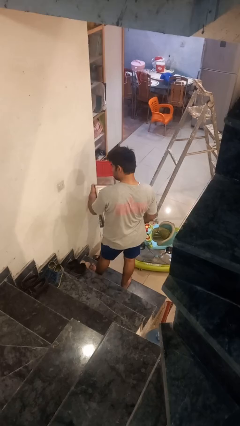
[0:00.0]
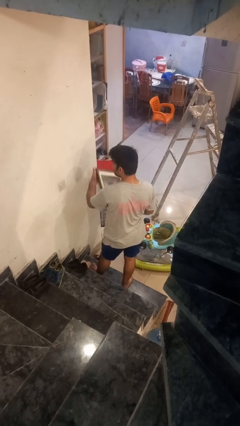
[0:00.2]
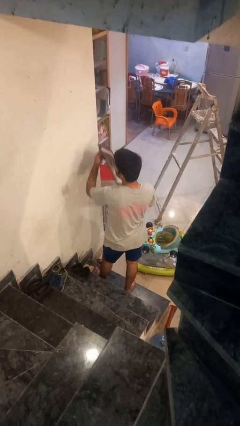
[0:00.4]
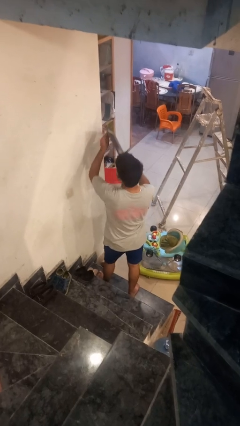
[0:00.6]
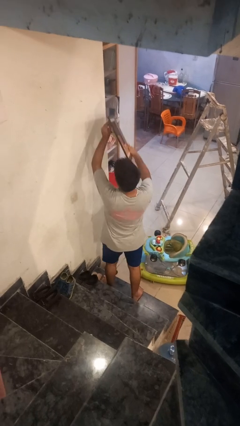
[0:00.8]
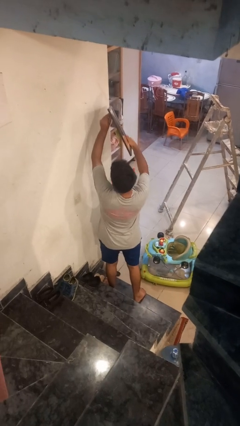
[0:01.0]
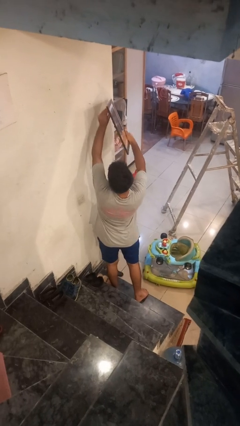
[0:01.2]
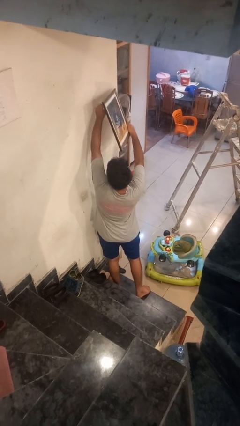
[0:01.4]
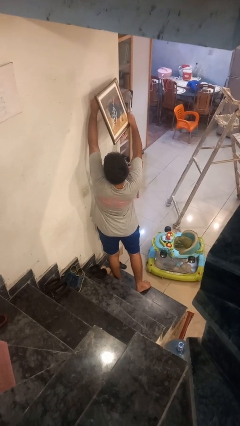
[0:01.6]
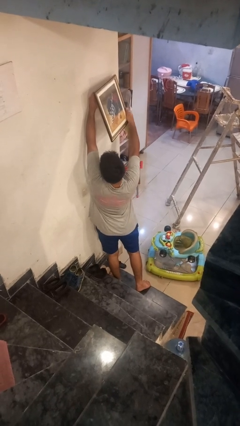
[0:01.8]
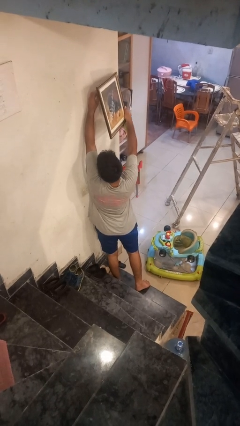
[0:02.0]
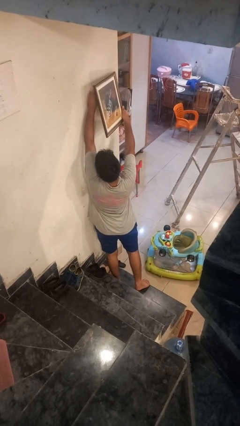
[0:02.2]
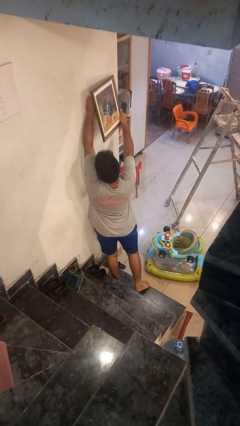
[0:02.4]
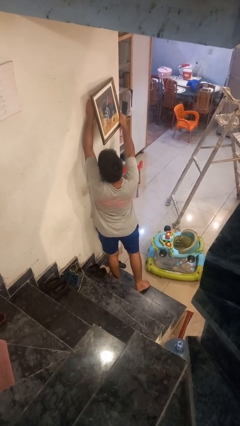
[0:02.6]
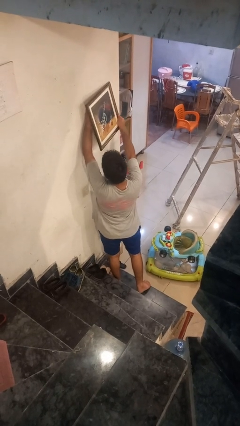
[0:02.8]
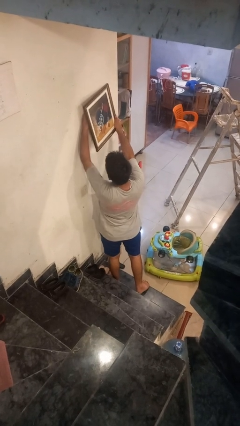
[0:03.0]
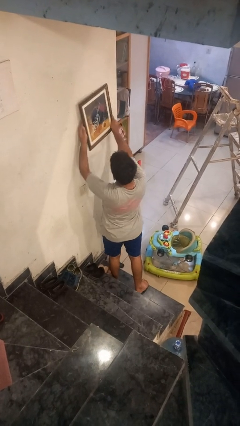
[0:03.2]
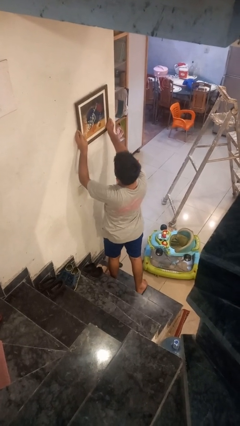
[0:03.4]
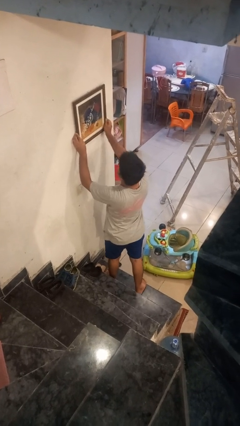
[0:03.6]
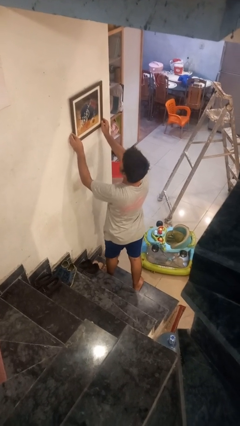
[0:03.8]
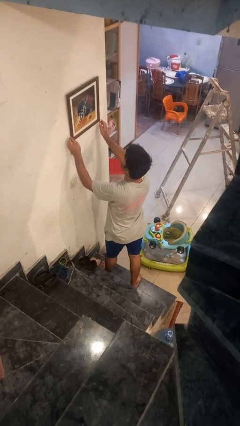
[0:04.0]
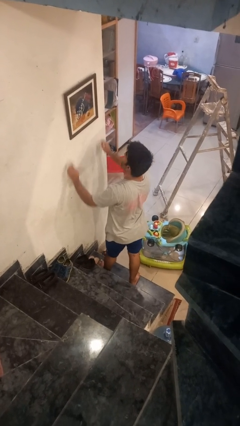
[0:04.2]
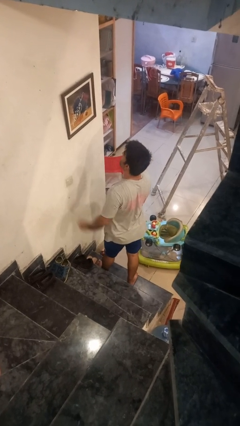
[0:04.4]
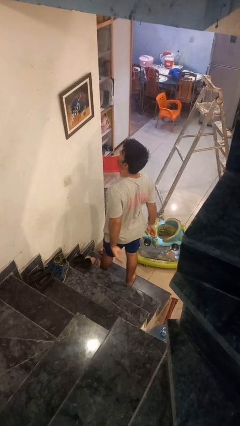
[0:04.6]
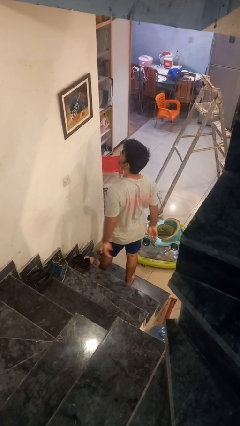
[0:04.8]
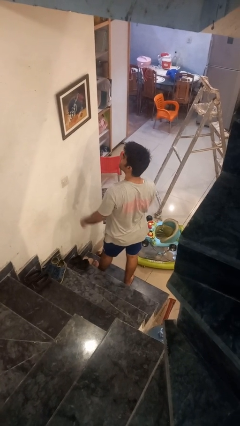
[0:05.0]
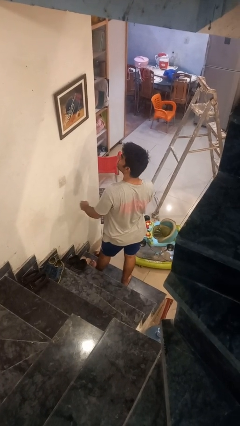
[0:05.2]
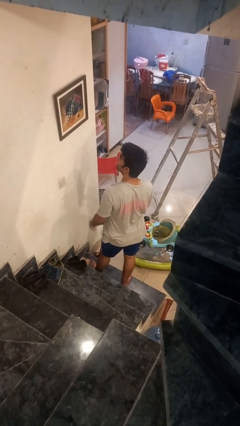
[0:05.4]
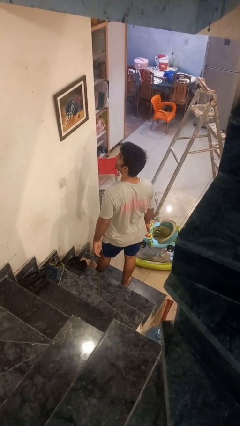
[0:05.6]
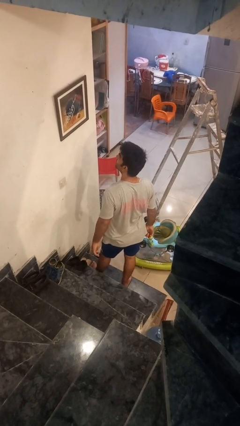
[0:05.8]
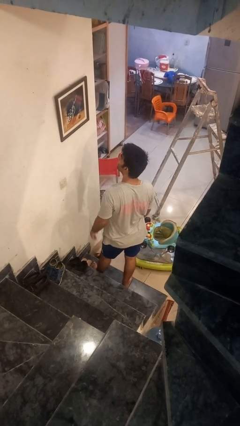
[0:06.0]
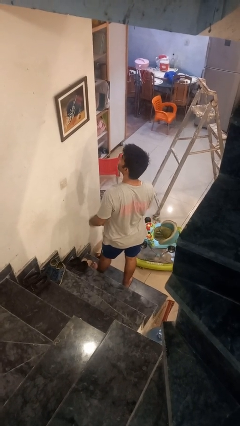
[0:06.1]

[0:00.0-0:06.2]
person puts up picture frame

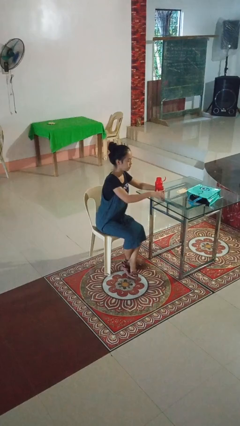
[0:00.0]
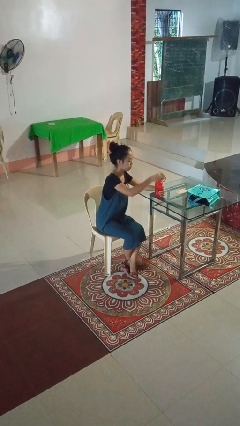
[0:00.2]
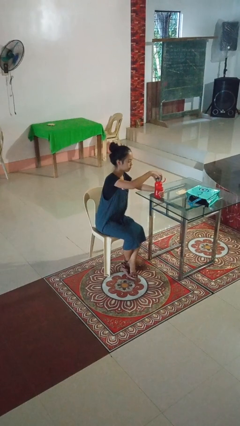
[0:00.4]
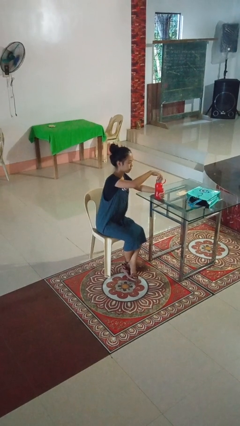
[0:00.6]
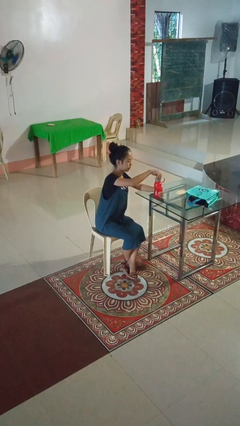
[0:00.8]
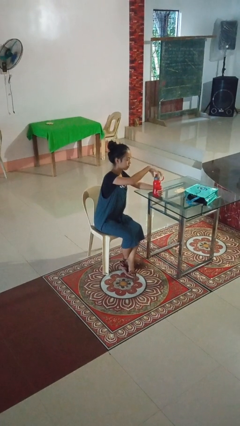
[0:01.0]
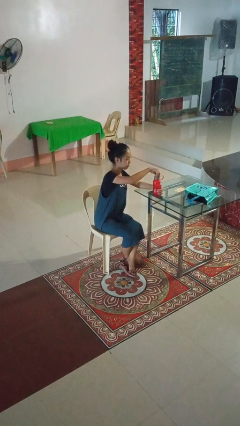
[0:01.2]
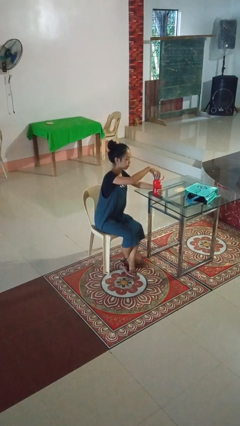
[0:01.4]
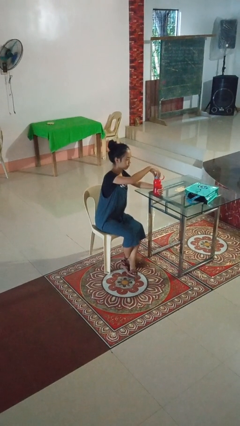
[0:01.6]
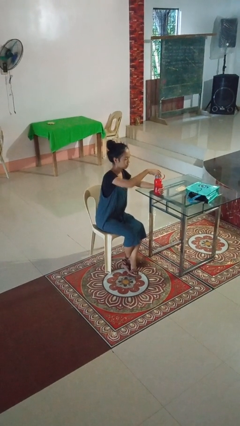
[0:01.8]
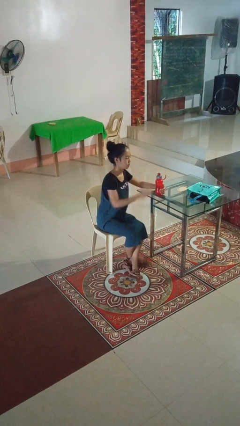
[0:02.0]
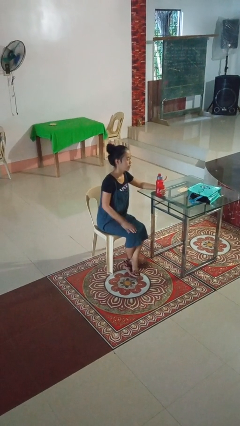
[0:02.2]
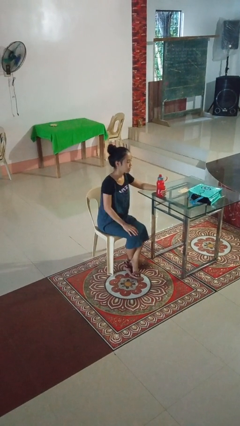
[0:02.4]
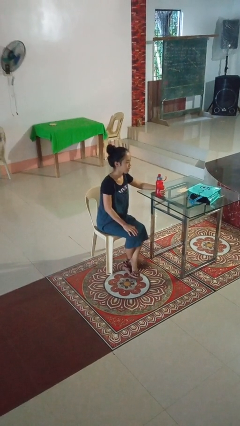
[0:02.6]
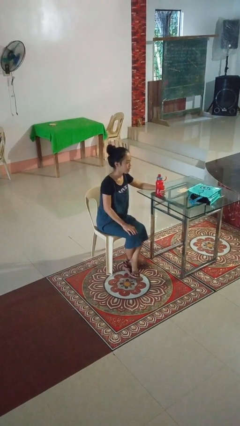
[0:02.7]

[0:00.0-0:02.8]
person screws lid to bottle

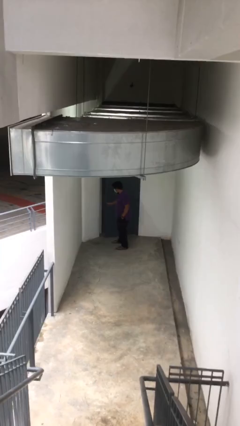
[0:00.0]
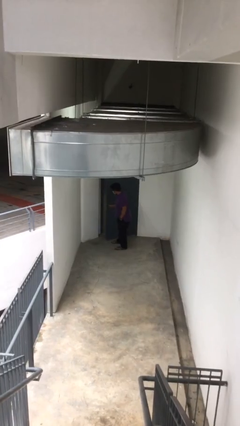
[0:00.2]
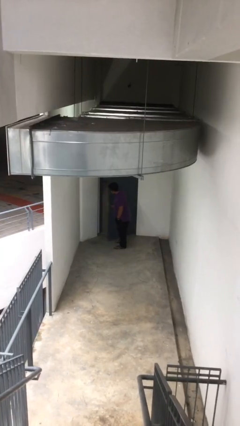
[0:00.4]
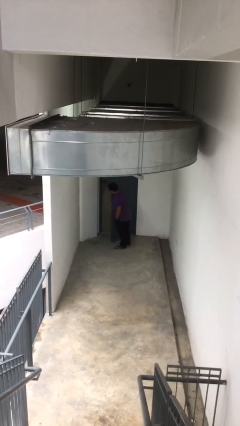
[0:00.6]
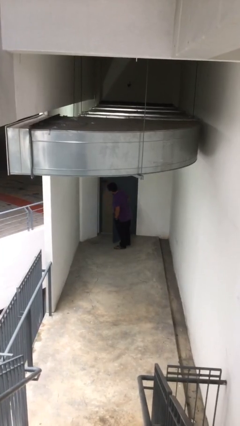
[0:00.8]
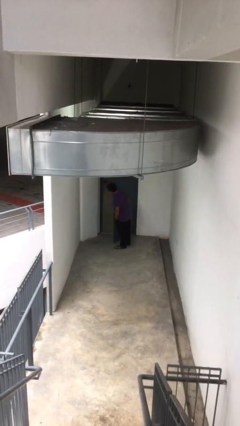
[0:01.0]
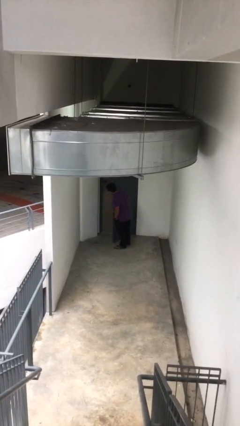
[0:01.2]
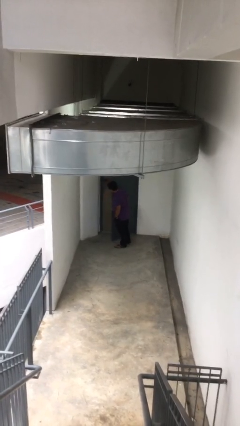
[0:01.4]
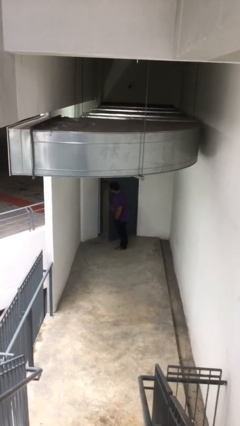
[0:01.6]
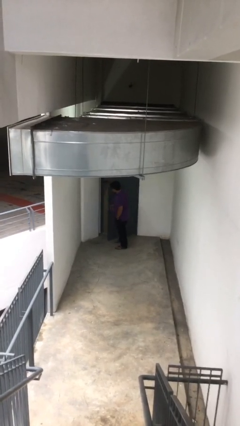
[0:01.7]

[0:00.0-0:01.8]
person opens facility door

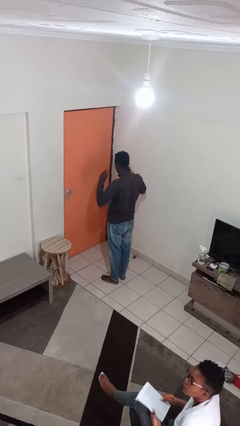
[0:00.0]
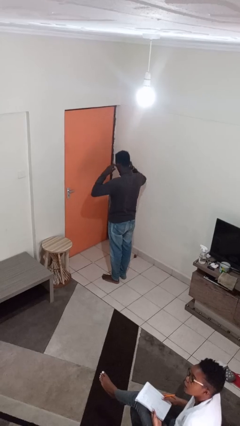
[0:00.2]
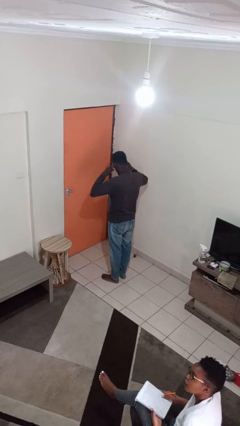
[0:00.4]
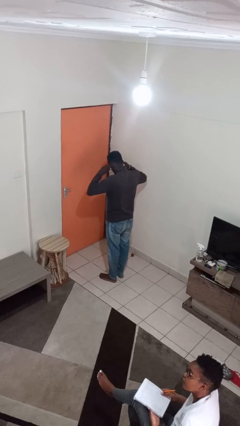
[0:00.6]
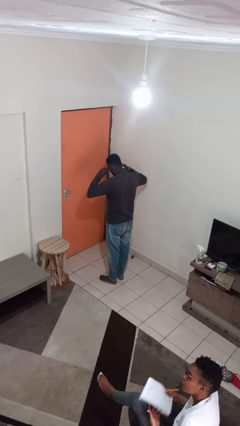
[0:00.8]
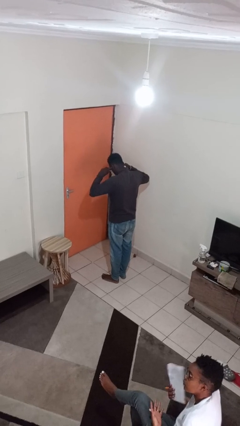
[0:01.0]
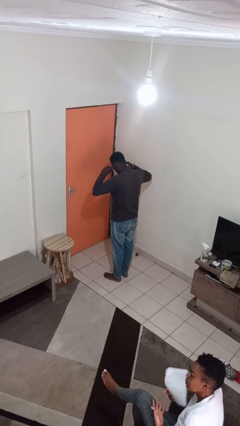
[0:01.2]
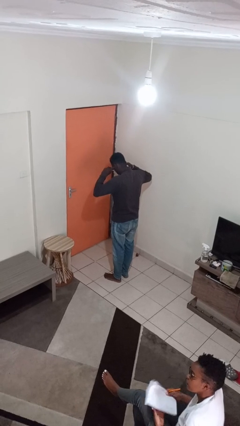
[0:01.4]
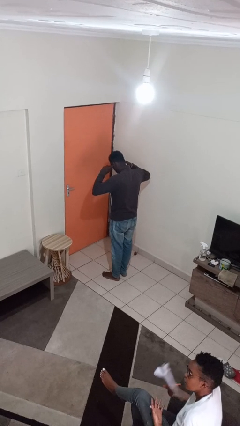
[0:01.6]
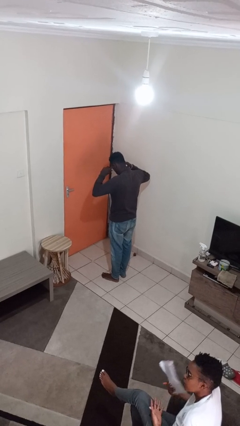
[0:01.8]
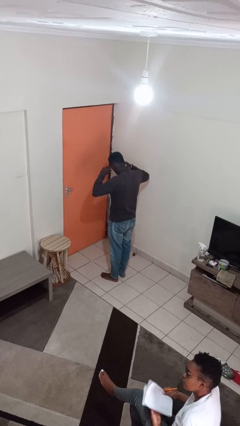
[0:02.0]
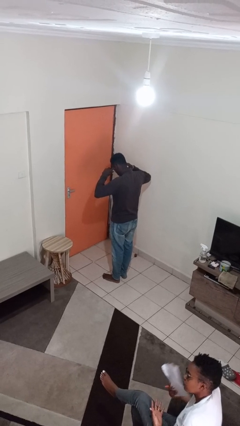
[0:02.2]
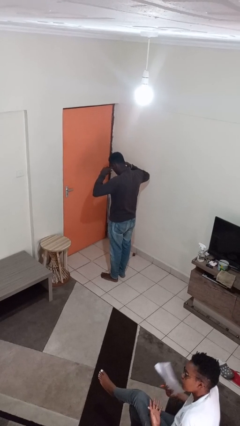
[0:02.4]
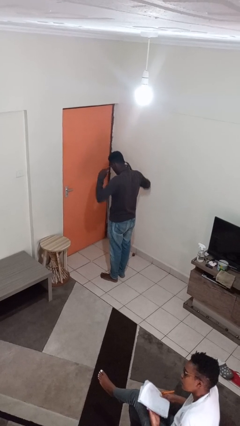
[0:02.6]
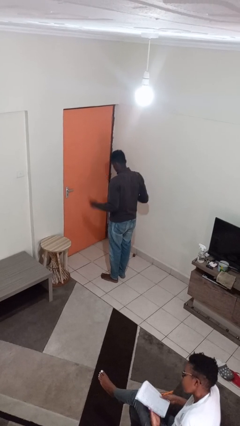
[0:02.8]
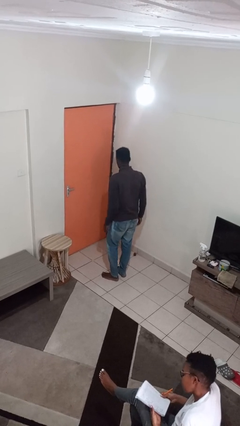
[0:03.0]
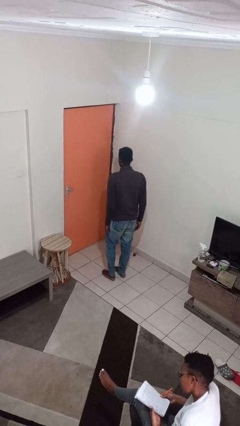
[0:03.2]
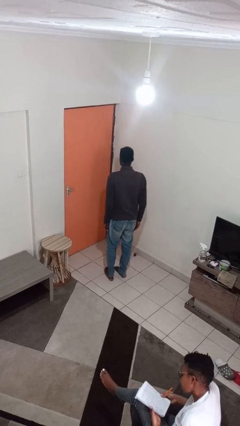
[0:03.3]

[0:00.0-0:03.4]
person puts fingers in ear

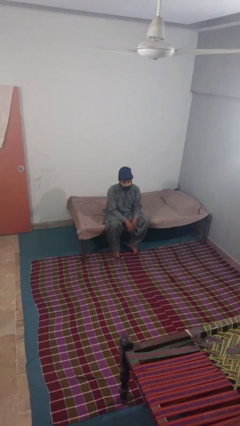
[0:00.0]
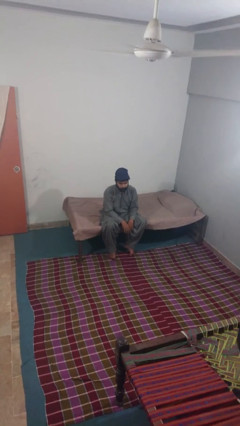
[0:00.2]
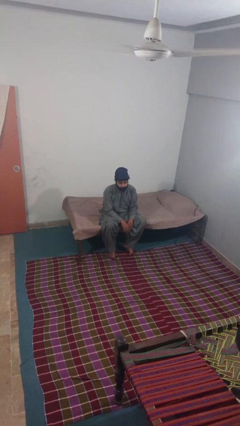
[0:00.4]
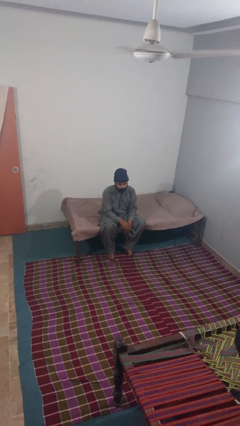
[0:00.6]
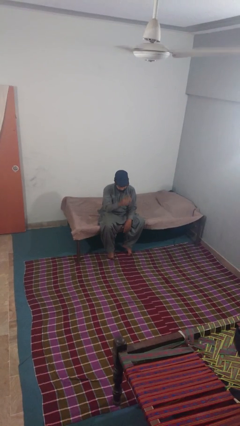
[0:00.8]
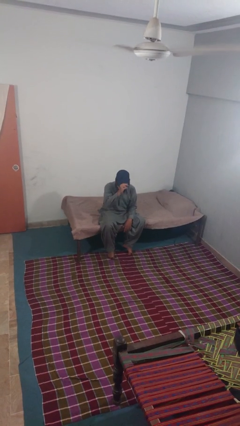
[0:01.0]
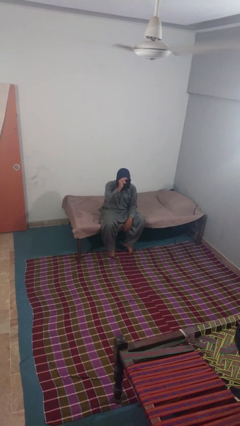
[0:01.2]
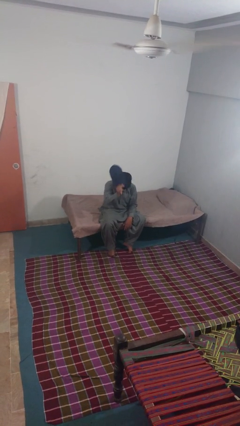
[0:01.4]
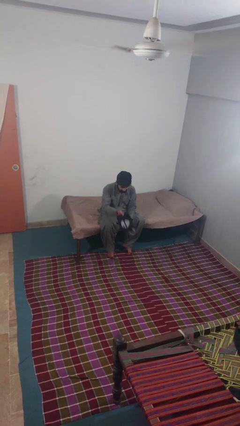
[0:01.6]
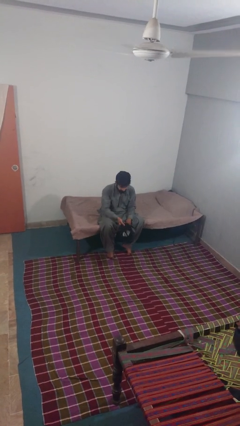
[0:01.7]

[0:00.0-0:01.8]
person takes off hat

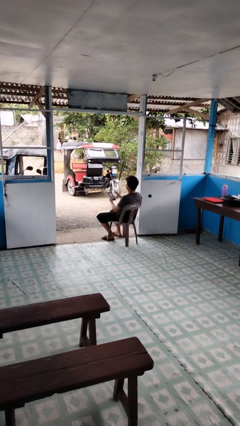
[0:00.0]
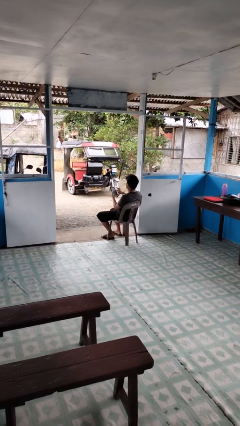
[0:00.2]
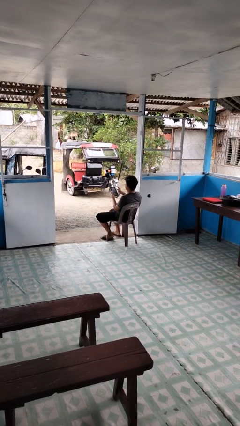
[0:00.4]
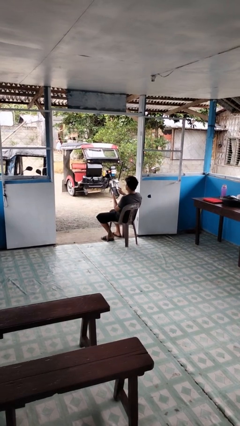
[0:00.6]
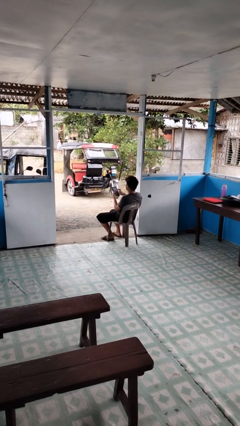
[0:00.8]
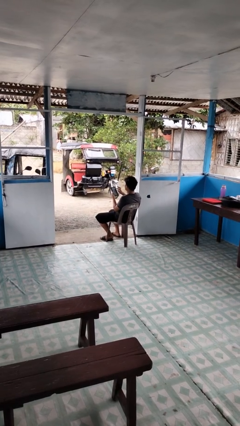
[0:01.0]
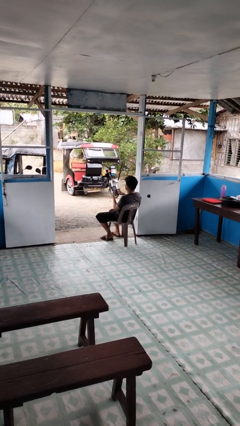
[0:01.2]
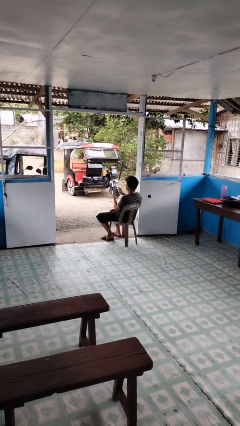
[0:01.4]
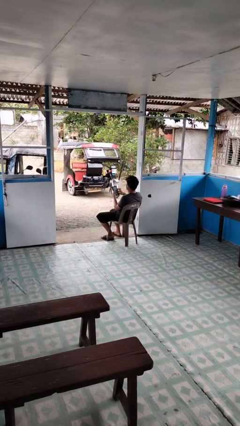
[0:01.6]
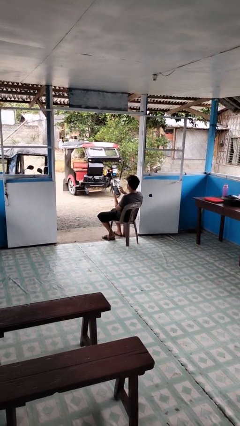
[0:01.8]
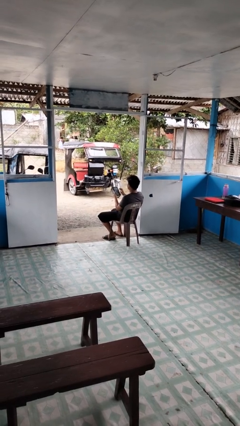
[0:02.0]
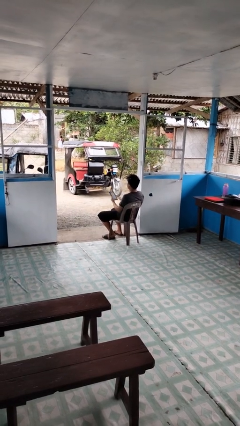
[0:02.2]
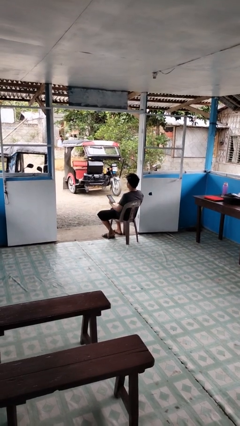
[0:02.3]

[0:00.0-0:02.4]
person interacts with tablet
